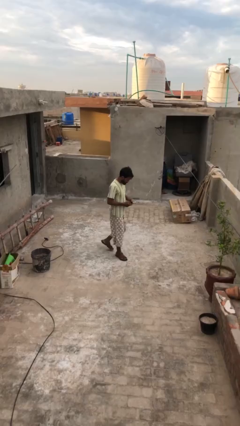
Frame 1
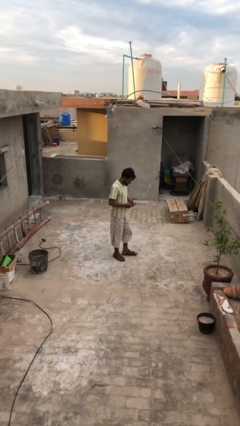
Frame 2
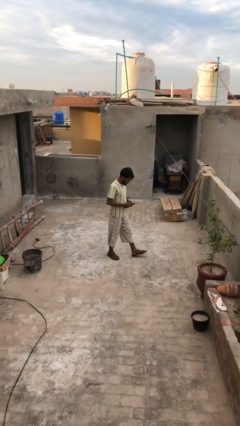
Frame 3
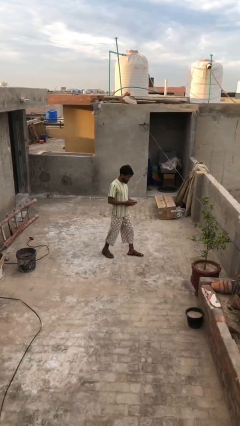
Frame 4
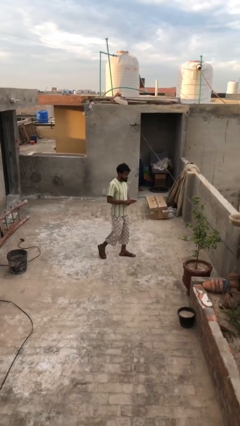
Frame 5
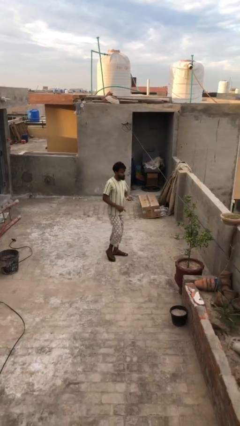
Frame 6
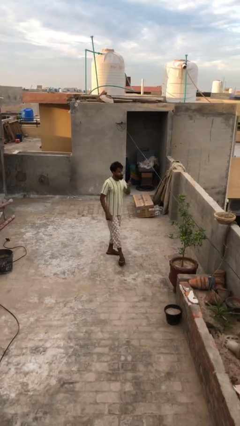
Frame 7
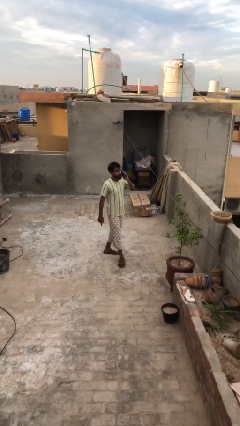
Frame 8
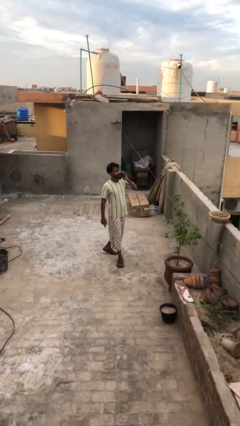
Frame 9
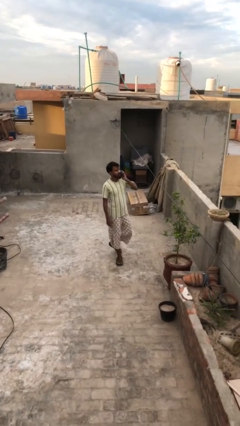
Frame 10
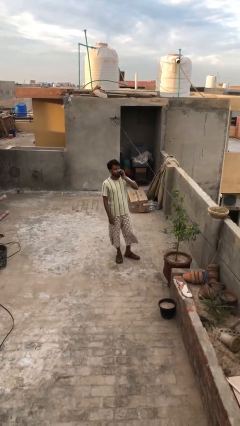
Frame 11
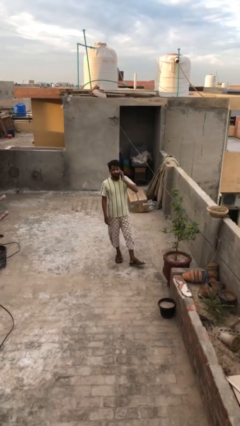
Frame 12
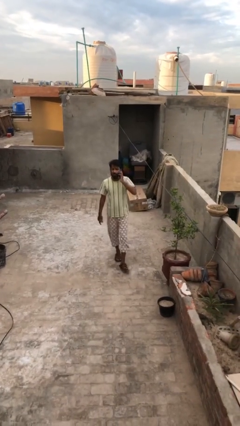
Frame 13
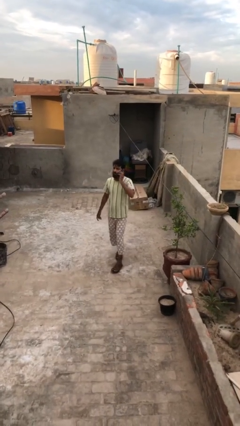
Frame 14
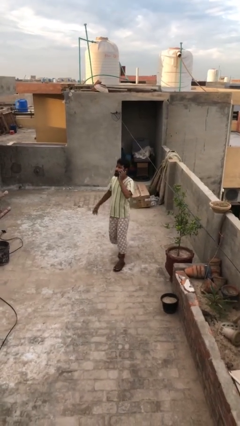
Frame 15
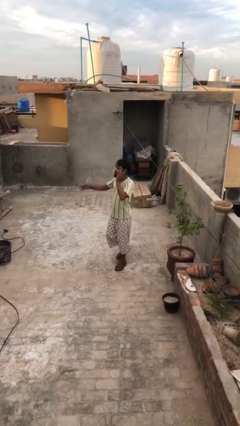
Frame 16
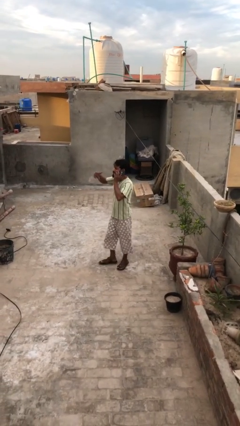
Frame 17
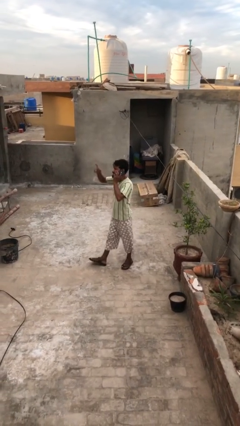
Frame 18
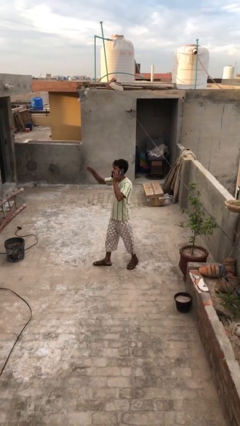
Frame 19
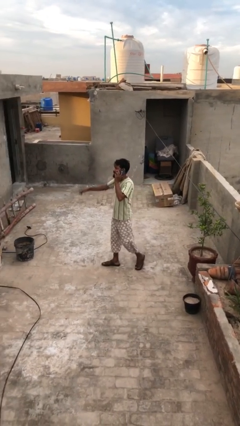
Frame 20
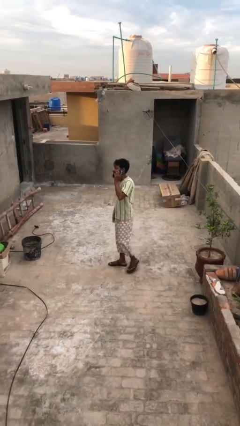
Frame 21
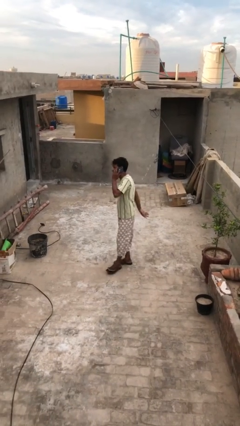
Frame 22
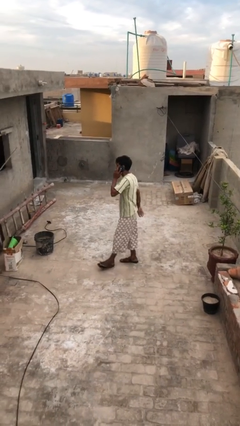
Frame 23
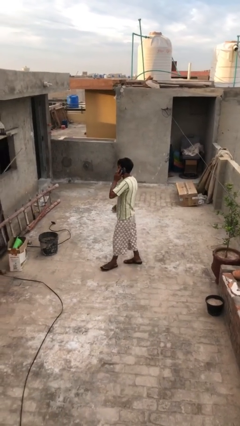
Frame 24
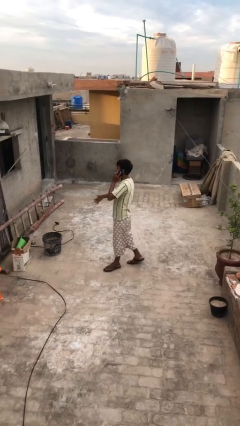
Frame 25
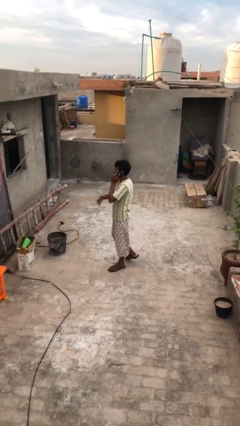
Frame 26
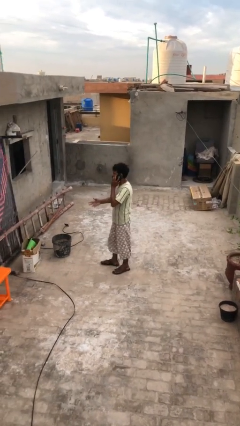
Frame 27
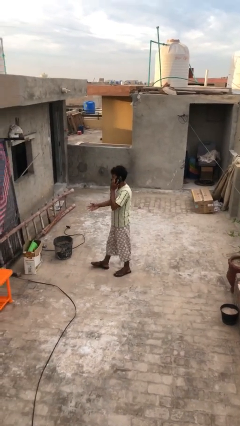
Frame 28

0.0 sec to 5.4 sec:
person talks on phone

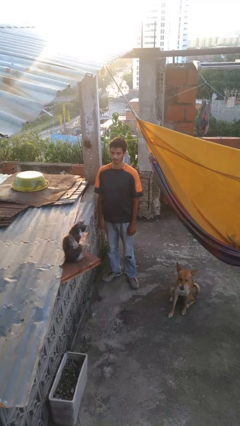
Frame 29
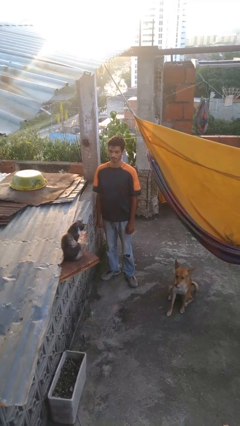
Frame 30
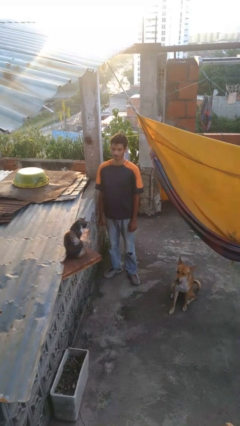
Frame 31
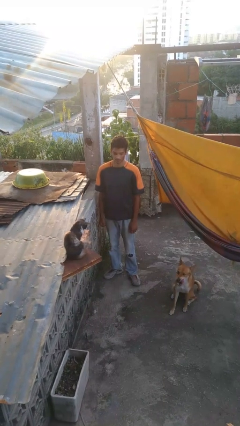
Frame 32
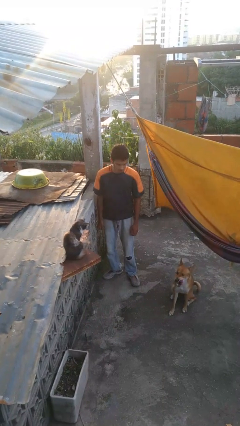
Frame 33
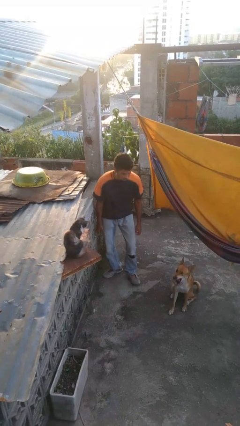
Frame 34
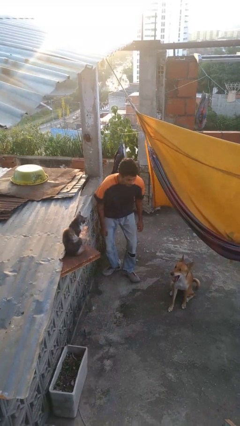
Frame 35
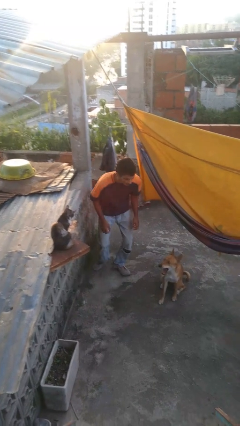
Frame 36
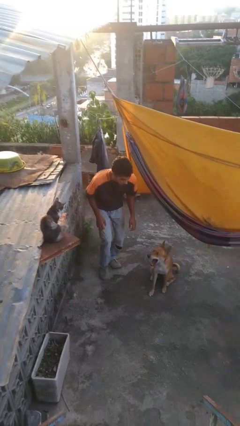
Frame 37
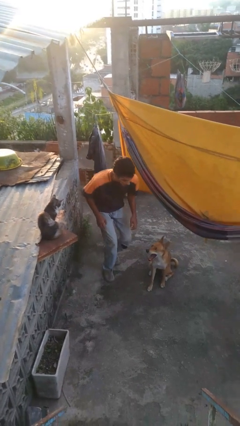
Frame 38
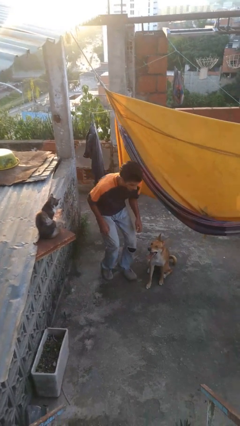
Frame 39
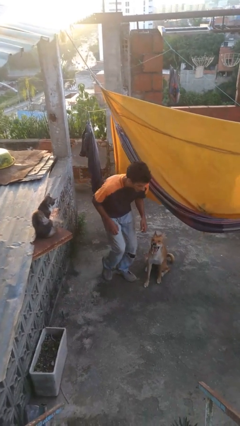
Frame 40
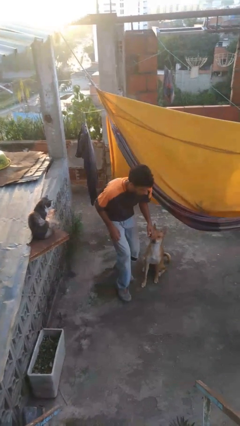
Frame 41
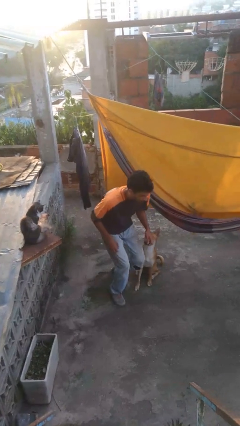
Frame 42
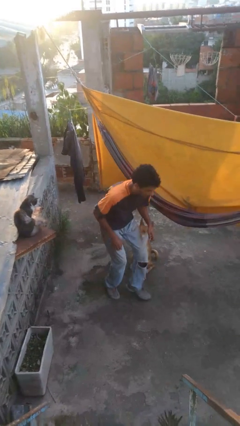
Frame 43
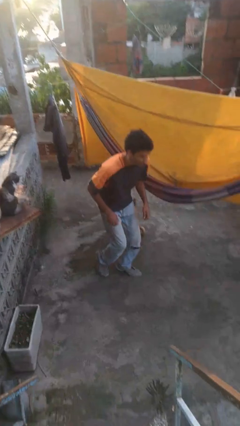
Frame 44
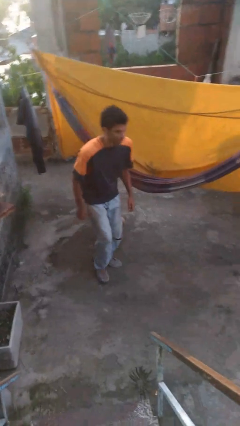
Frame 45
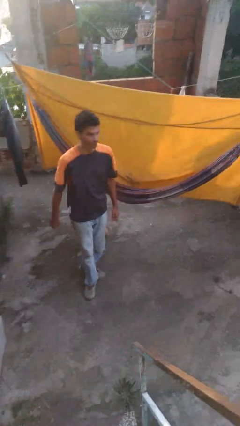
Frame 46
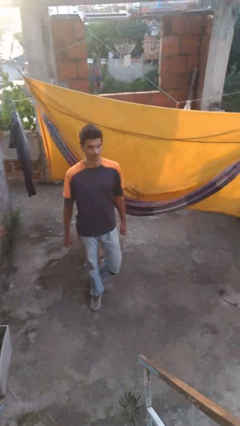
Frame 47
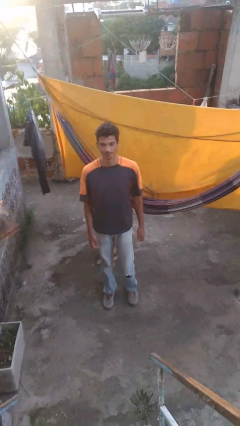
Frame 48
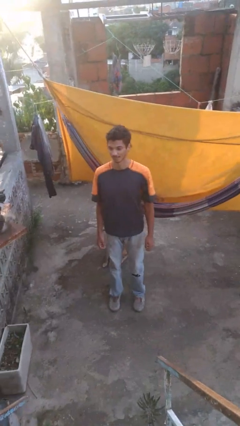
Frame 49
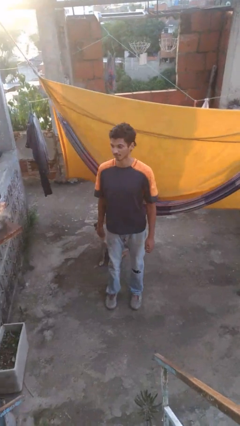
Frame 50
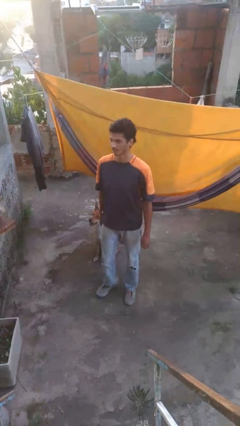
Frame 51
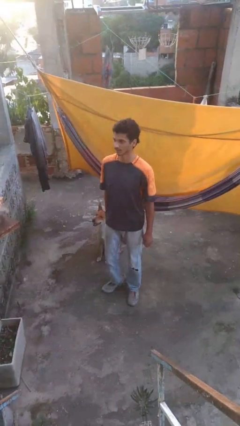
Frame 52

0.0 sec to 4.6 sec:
person walks tiptoe

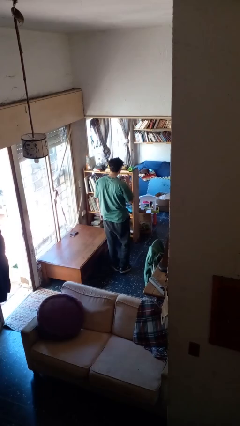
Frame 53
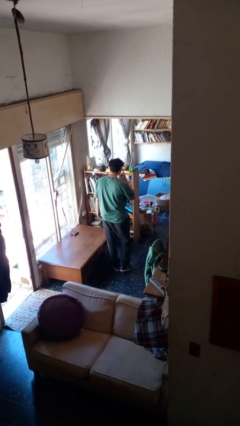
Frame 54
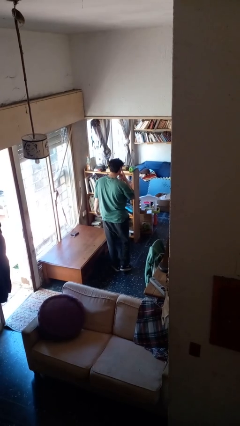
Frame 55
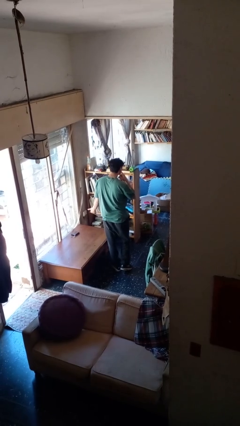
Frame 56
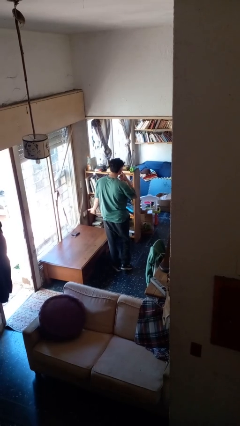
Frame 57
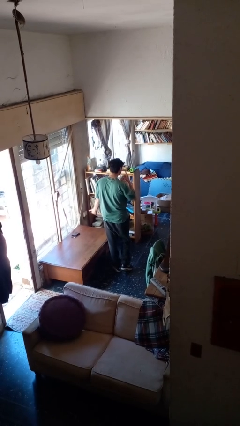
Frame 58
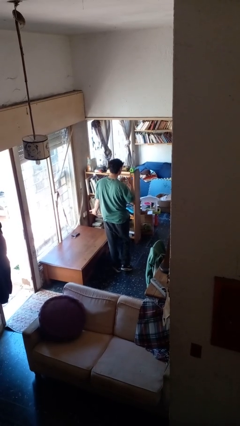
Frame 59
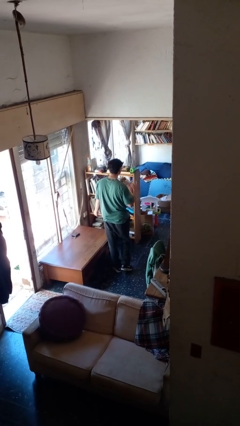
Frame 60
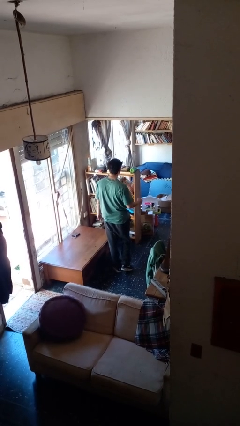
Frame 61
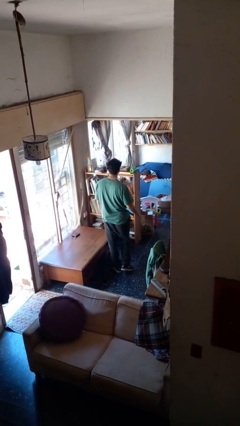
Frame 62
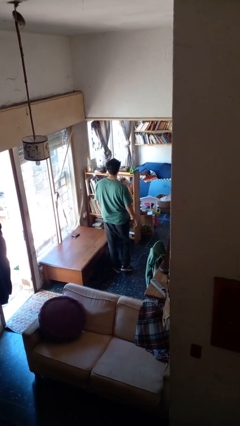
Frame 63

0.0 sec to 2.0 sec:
person gestures listen closely

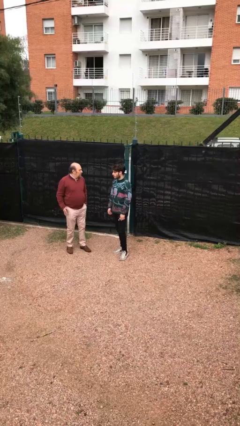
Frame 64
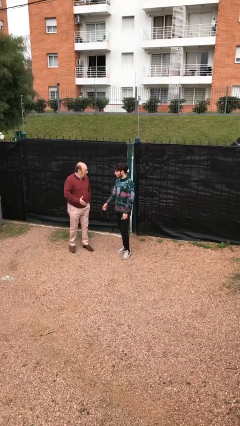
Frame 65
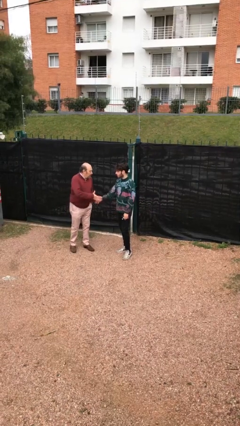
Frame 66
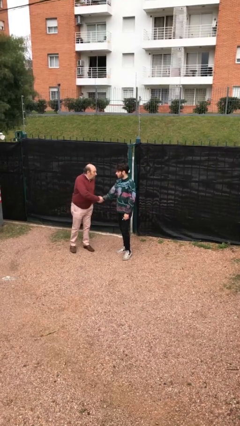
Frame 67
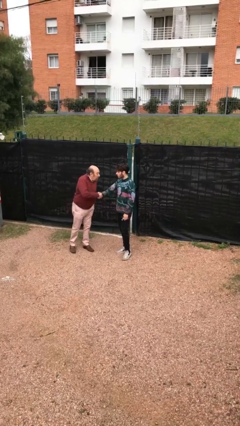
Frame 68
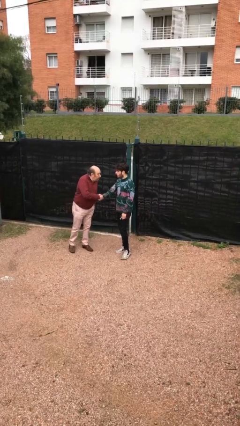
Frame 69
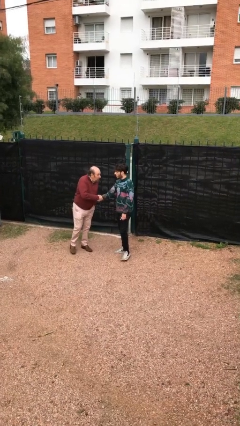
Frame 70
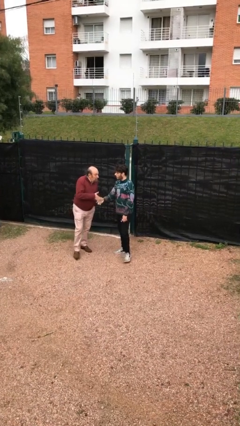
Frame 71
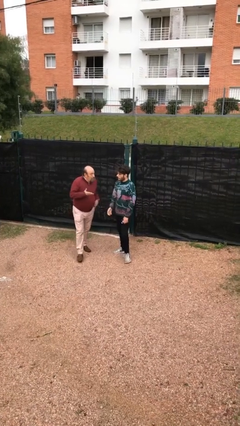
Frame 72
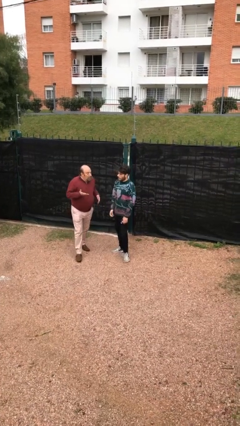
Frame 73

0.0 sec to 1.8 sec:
person shakes hand

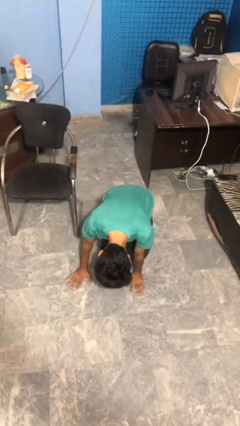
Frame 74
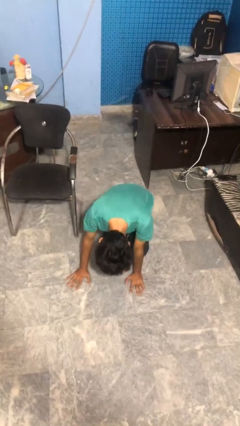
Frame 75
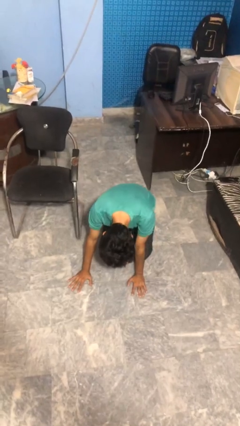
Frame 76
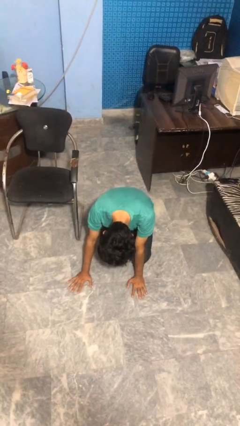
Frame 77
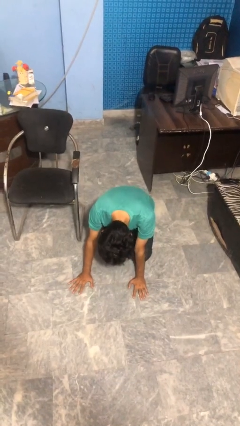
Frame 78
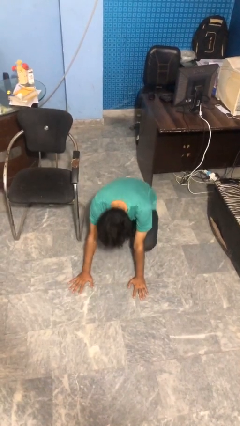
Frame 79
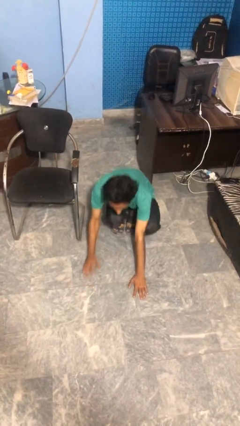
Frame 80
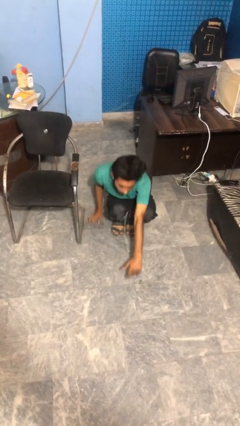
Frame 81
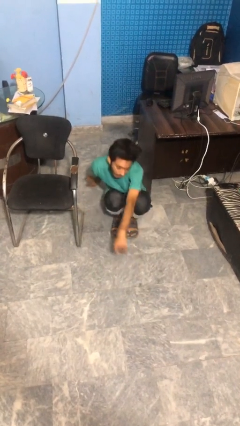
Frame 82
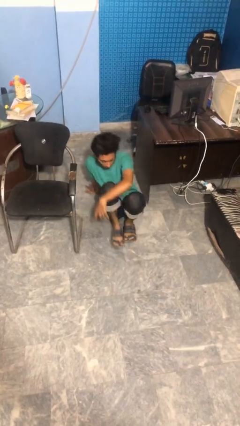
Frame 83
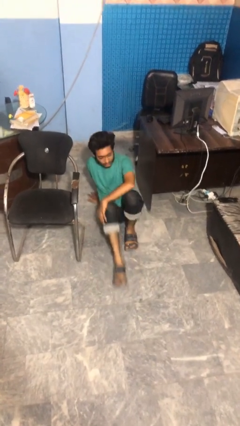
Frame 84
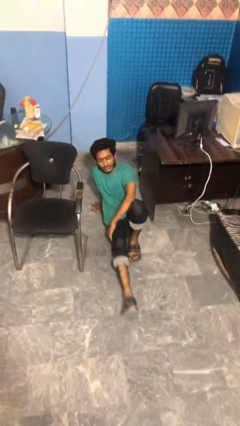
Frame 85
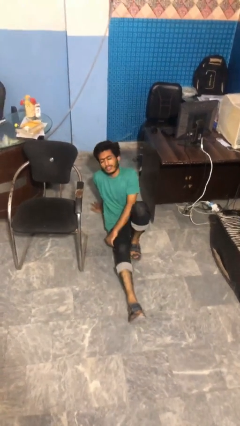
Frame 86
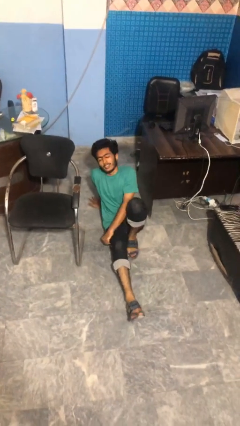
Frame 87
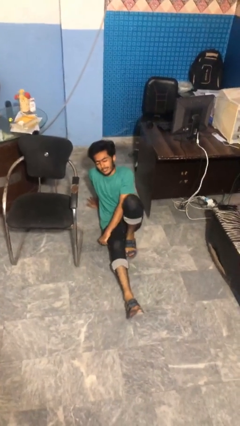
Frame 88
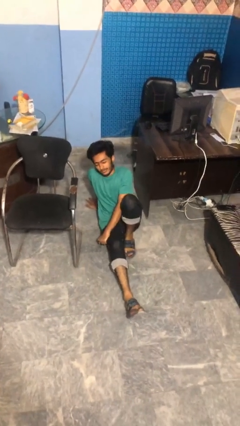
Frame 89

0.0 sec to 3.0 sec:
person lies down on floor

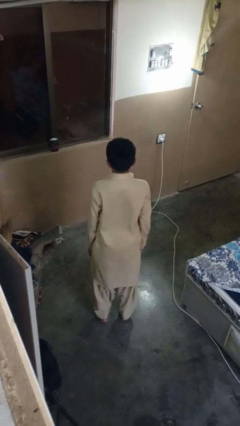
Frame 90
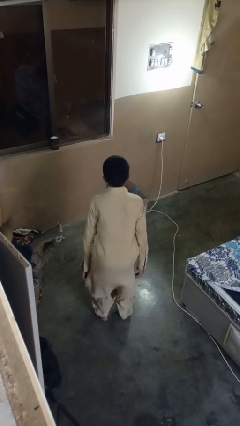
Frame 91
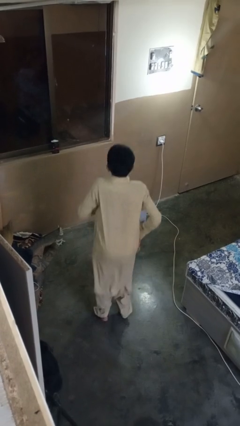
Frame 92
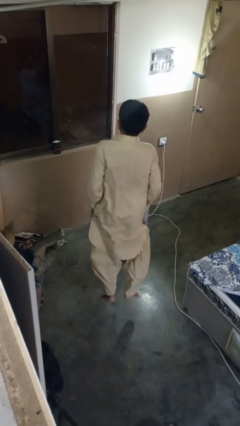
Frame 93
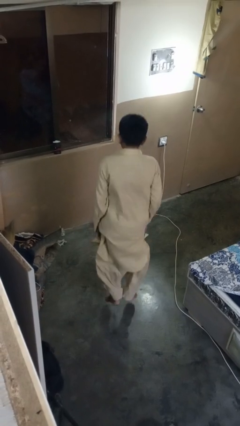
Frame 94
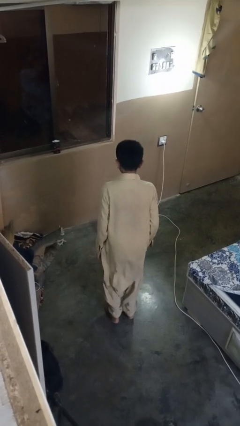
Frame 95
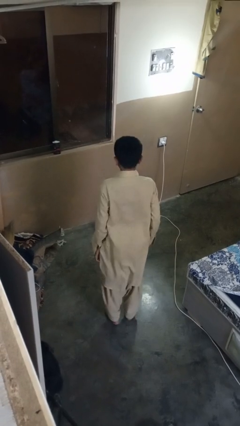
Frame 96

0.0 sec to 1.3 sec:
person jumps
